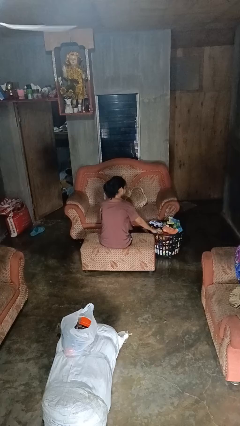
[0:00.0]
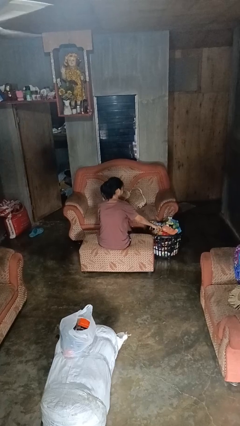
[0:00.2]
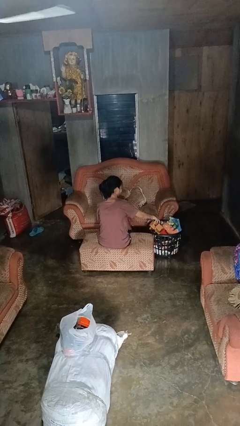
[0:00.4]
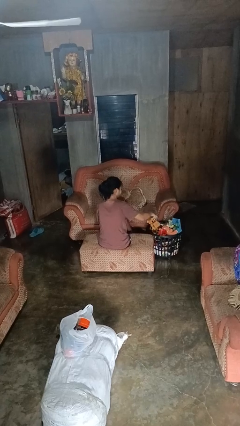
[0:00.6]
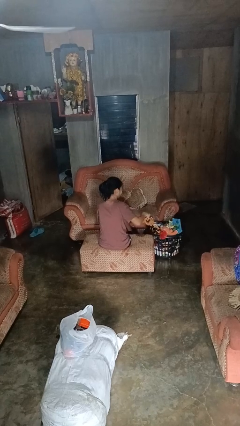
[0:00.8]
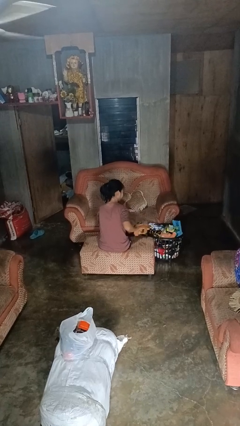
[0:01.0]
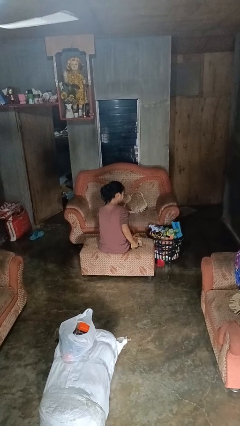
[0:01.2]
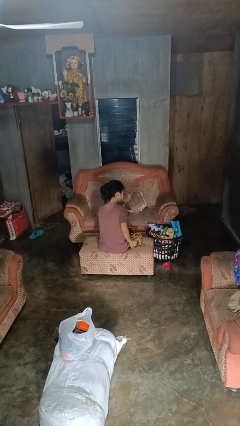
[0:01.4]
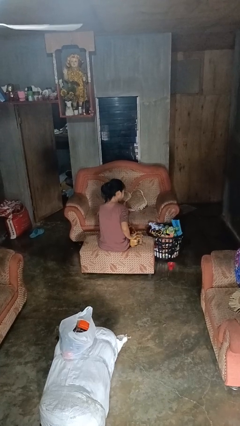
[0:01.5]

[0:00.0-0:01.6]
person takes object from basket

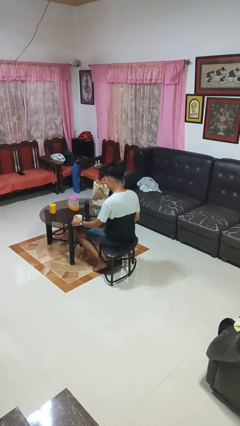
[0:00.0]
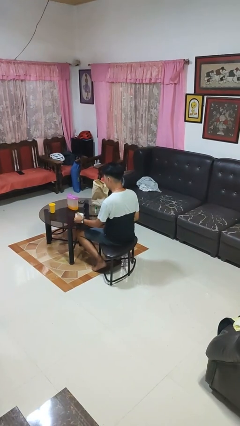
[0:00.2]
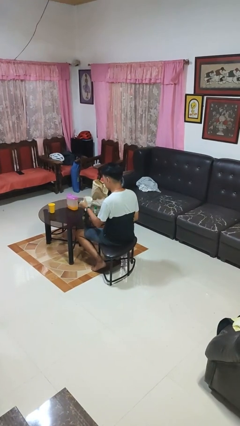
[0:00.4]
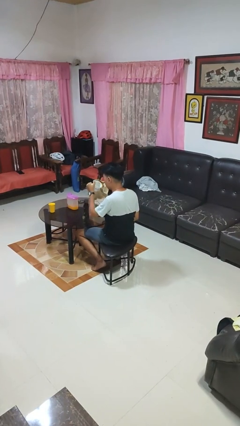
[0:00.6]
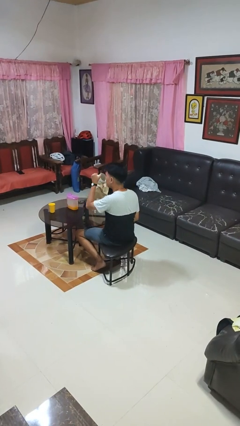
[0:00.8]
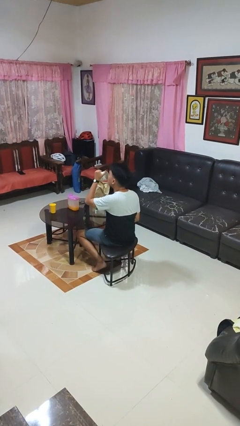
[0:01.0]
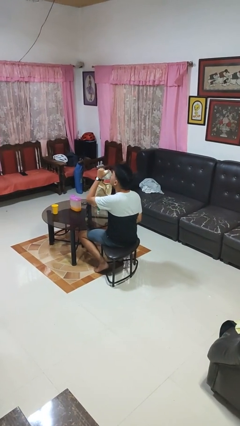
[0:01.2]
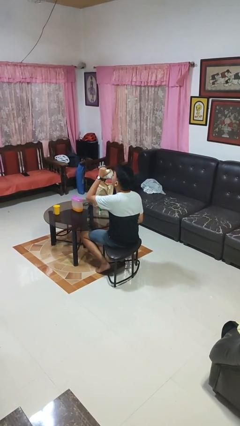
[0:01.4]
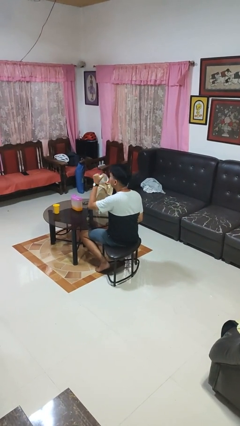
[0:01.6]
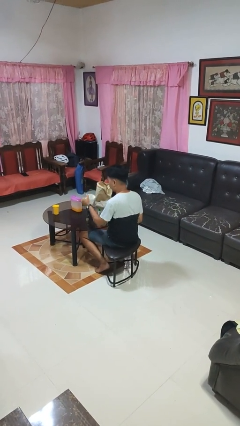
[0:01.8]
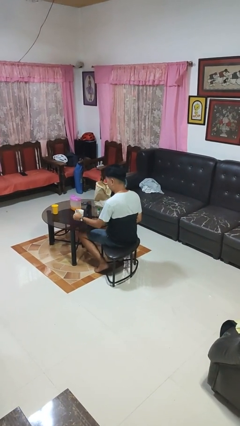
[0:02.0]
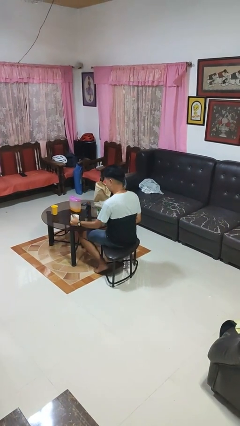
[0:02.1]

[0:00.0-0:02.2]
person drinks from mug

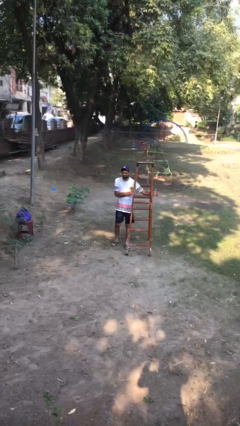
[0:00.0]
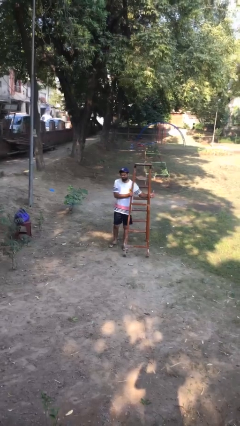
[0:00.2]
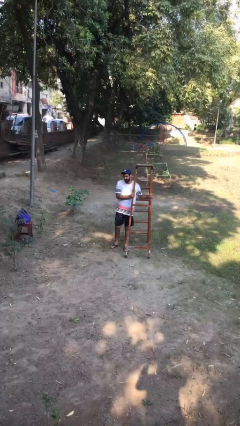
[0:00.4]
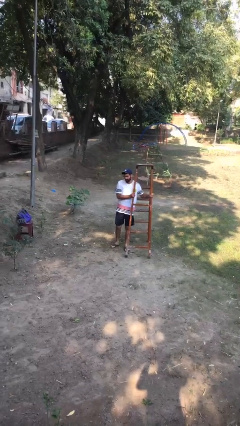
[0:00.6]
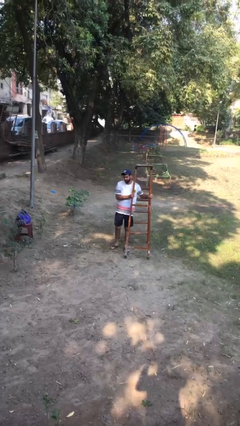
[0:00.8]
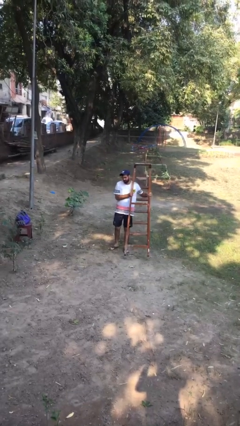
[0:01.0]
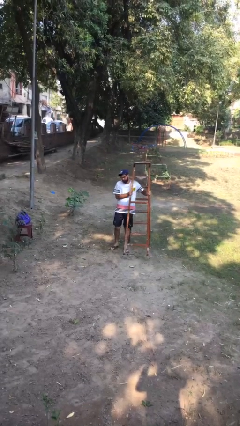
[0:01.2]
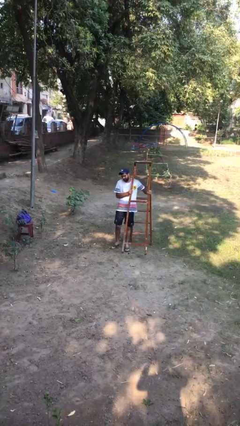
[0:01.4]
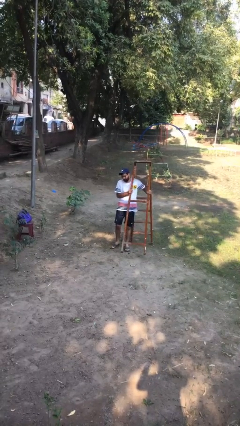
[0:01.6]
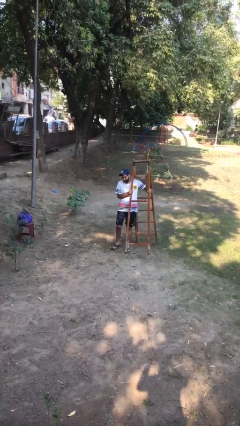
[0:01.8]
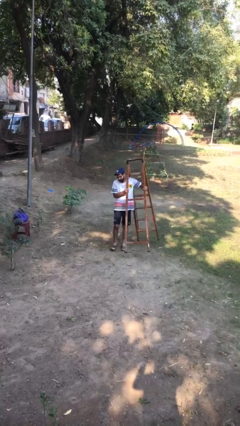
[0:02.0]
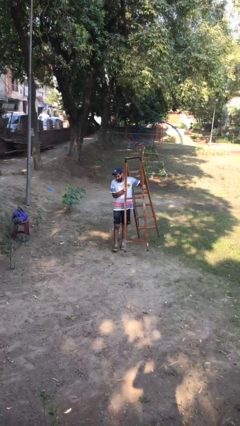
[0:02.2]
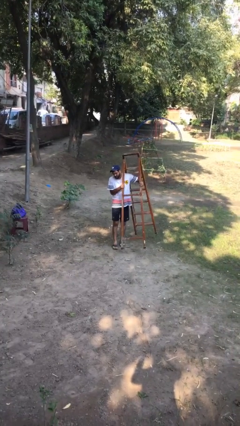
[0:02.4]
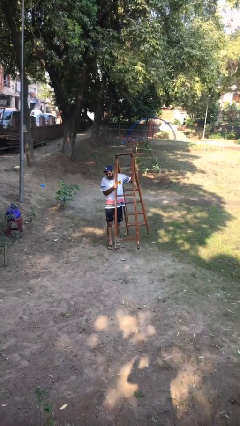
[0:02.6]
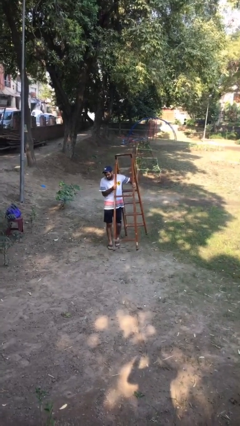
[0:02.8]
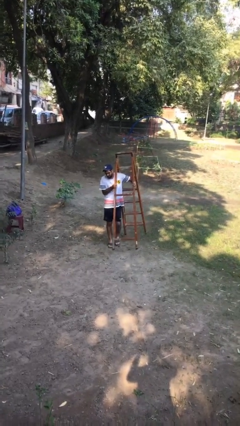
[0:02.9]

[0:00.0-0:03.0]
person picks up object from floor

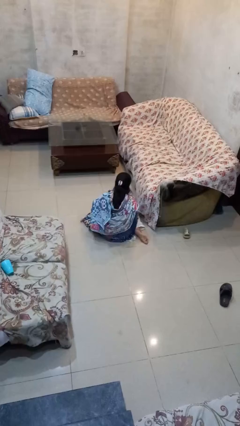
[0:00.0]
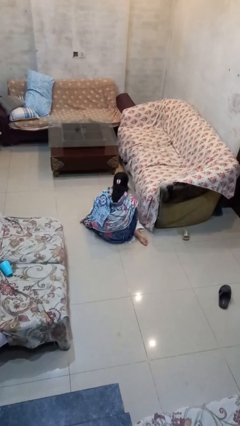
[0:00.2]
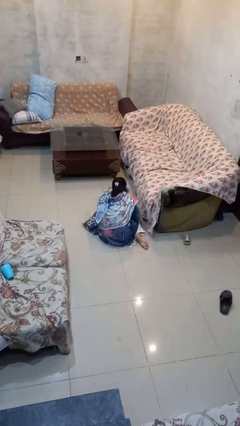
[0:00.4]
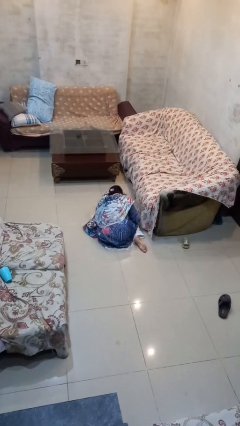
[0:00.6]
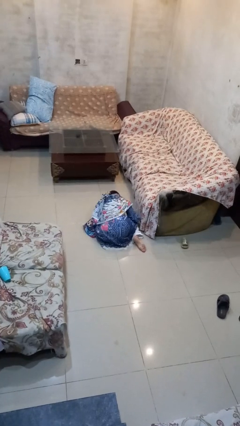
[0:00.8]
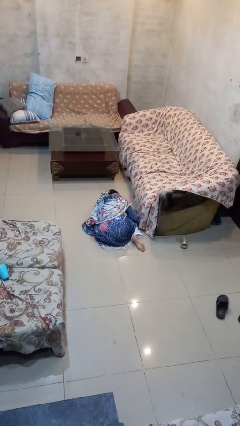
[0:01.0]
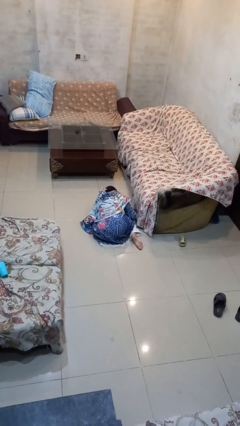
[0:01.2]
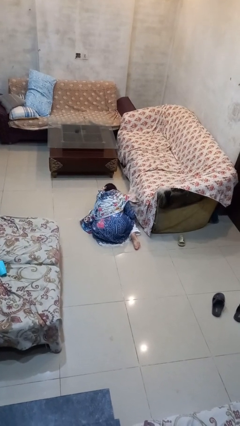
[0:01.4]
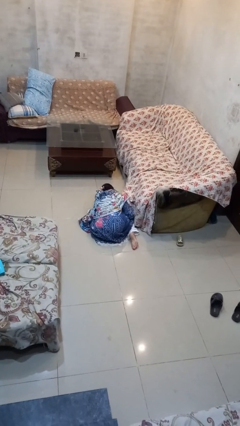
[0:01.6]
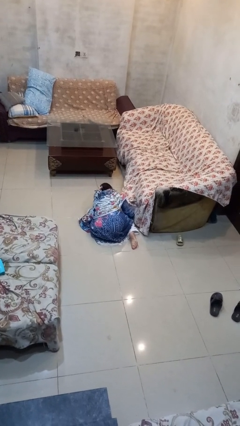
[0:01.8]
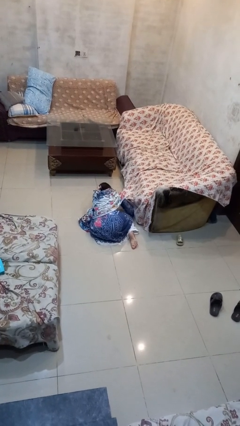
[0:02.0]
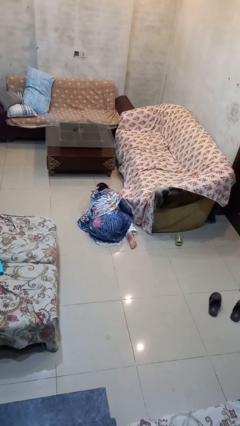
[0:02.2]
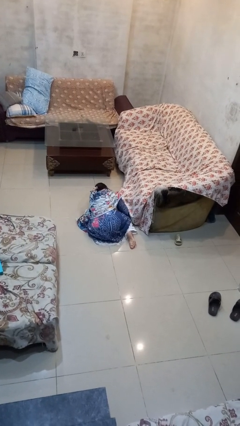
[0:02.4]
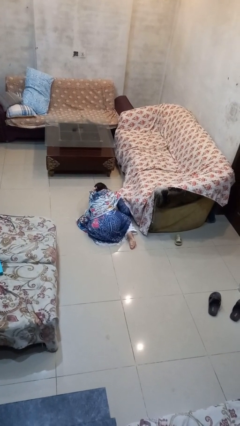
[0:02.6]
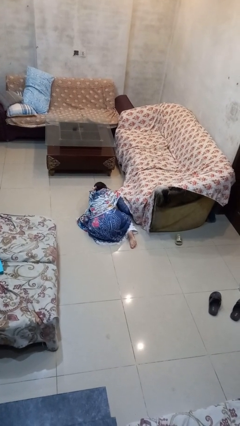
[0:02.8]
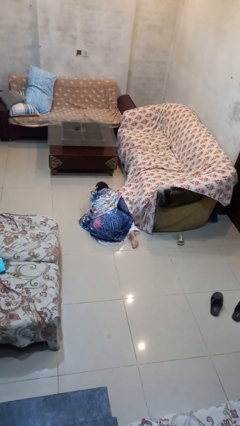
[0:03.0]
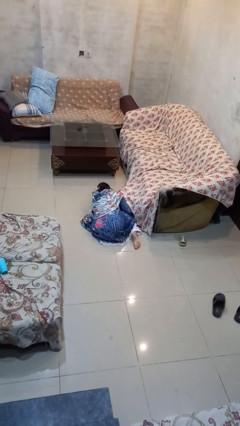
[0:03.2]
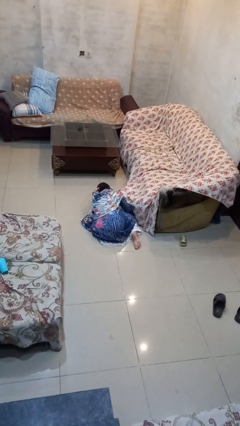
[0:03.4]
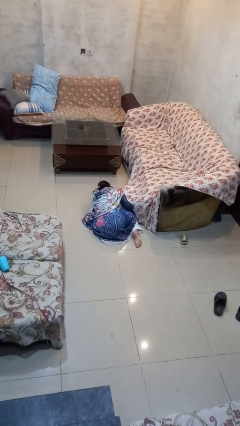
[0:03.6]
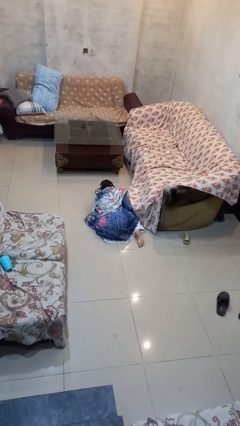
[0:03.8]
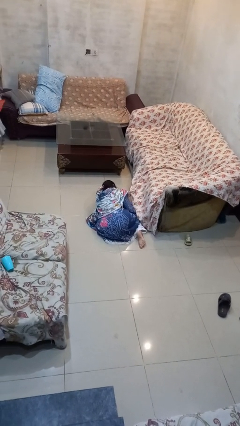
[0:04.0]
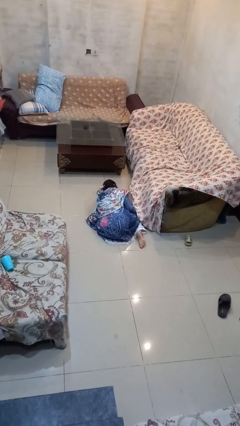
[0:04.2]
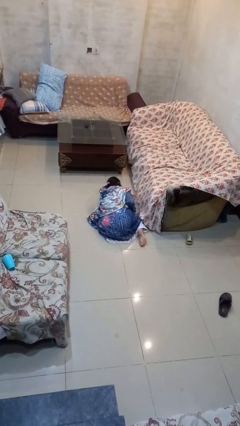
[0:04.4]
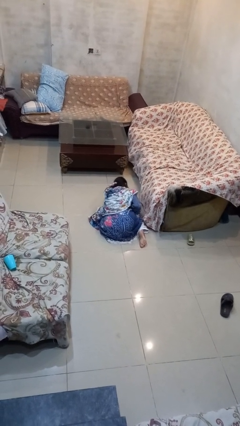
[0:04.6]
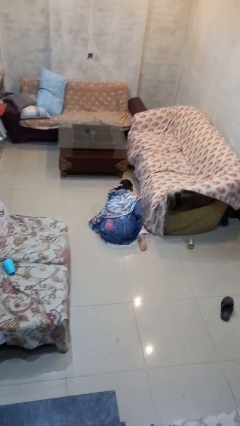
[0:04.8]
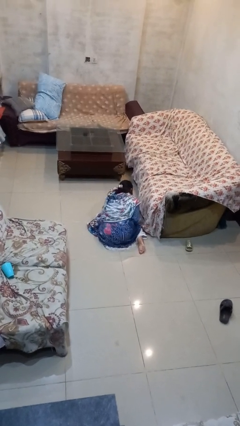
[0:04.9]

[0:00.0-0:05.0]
person searches under couch

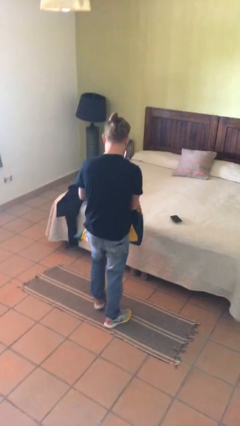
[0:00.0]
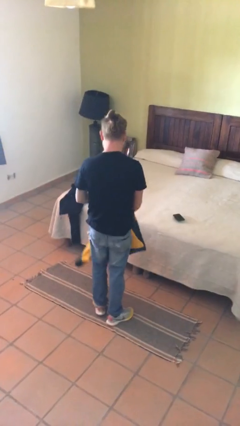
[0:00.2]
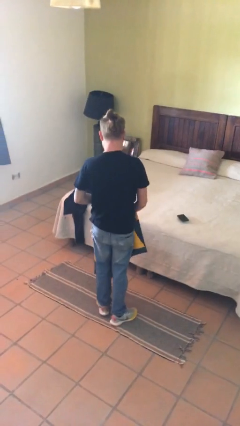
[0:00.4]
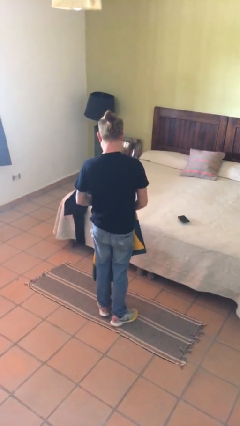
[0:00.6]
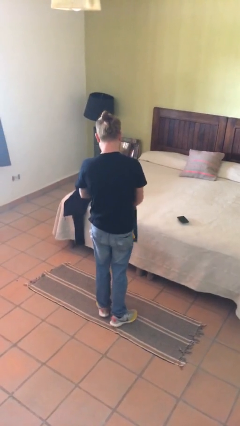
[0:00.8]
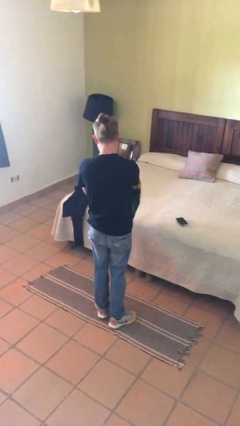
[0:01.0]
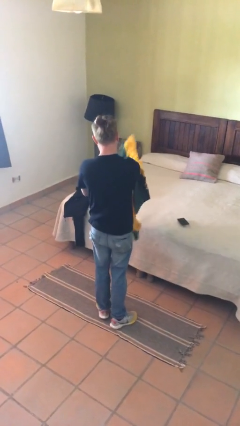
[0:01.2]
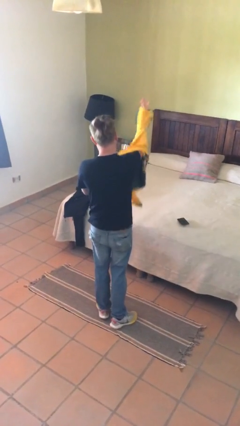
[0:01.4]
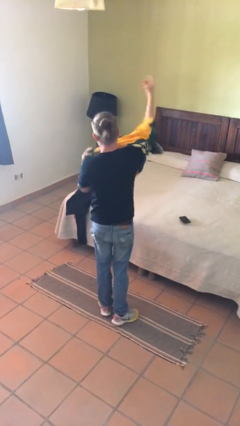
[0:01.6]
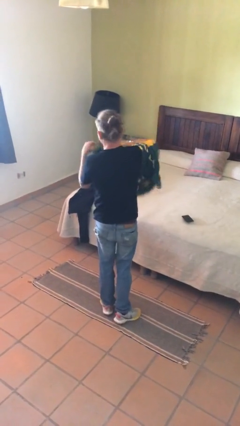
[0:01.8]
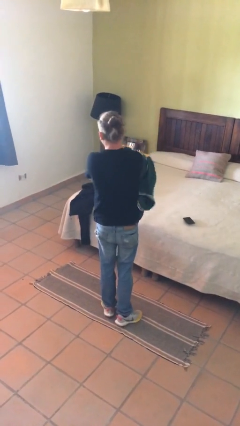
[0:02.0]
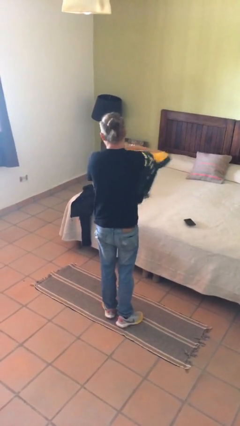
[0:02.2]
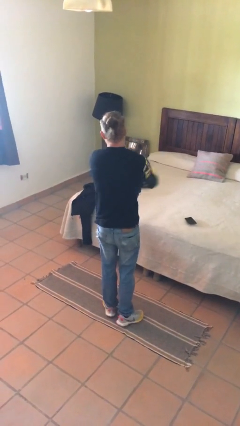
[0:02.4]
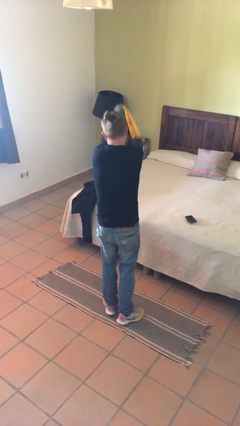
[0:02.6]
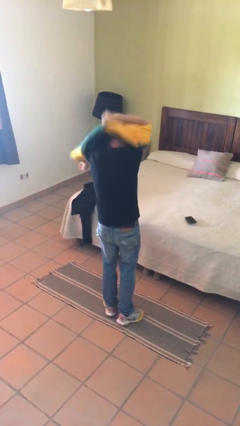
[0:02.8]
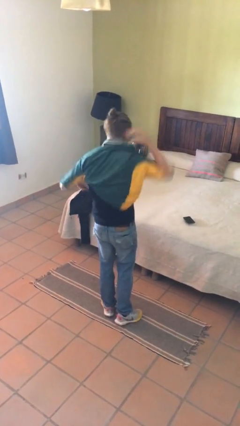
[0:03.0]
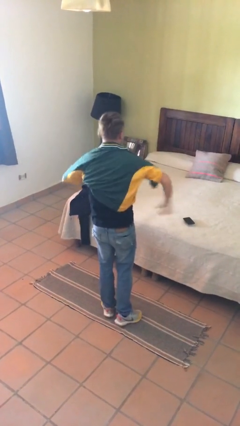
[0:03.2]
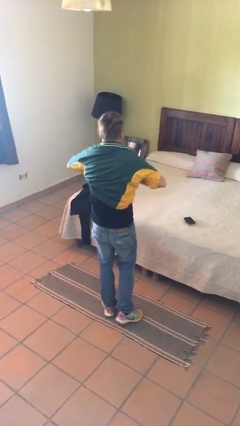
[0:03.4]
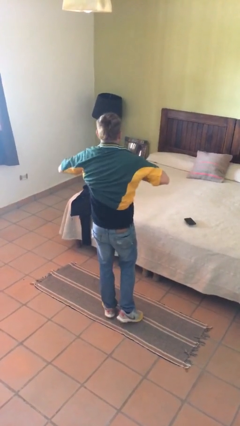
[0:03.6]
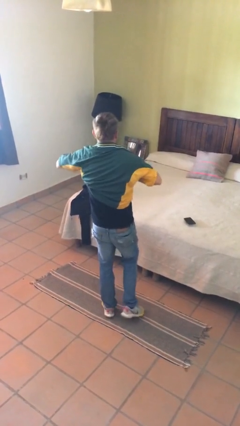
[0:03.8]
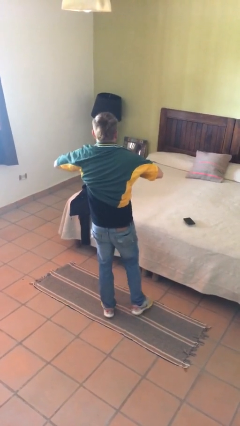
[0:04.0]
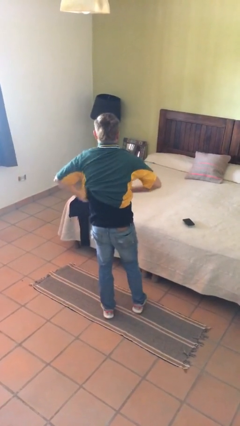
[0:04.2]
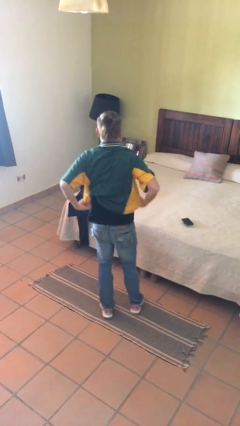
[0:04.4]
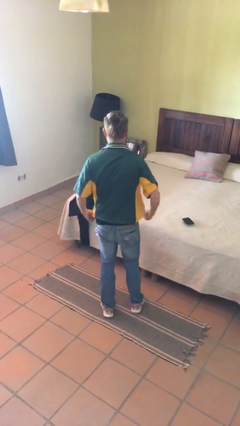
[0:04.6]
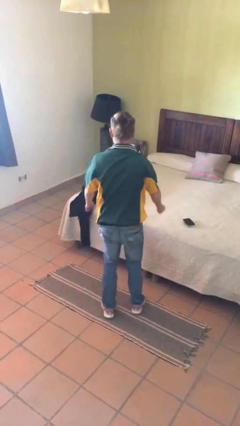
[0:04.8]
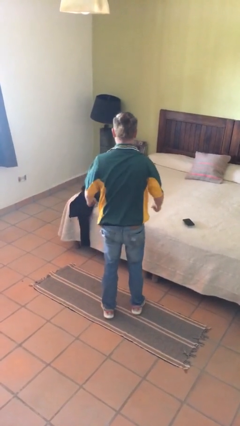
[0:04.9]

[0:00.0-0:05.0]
person puts on shirt

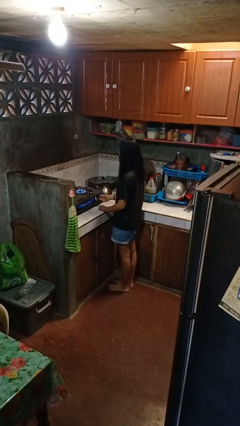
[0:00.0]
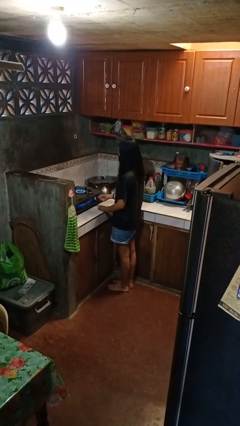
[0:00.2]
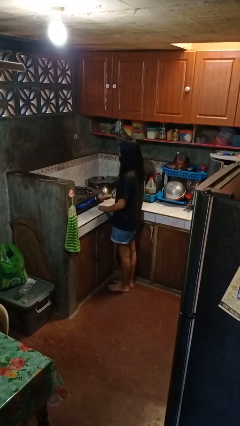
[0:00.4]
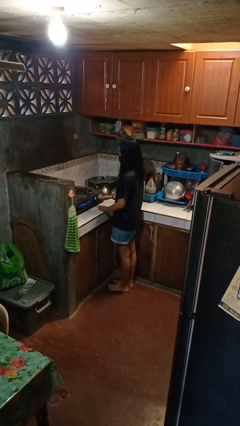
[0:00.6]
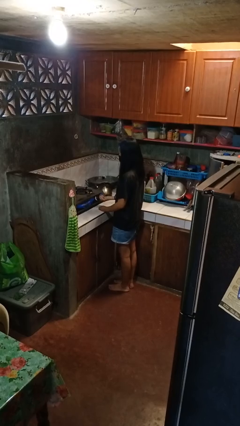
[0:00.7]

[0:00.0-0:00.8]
person turns off stovetop
